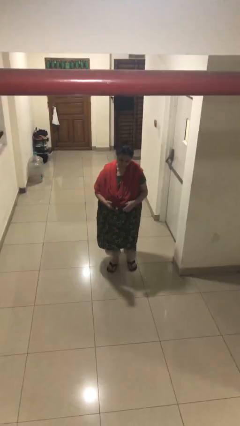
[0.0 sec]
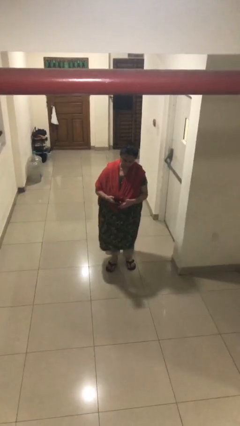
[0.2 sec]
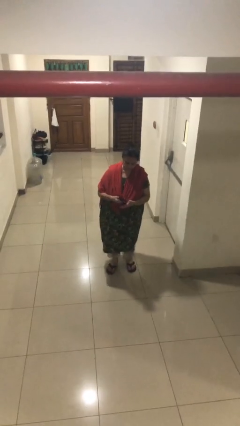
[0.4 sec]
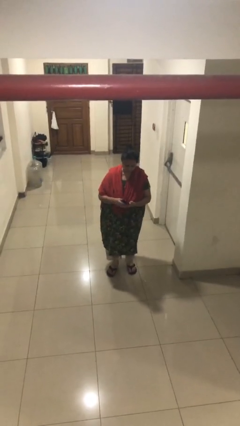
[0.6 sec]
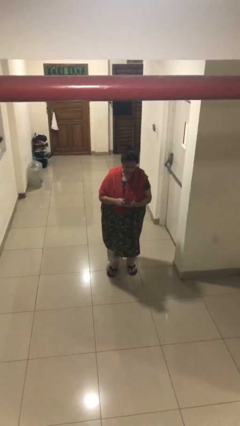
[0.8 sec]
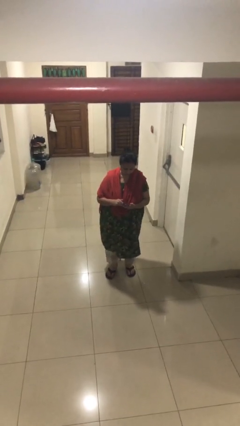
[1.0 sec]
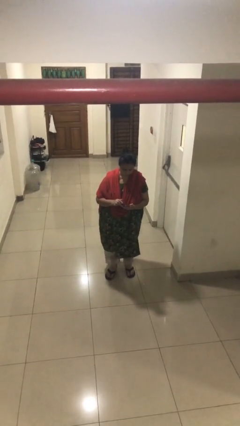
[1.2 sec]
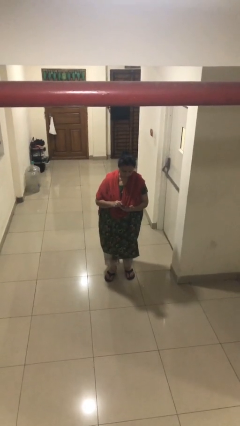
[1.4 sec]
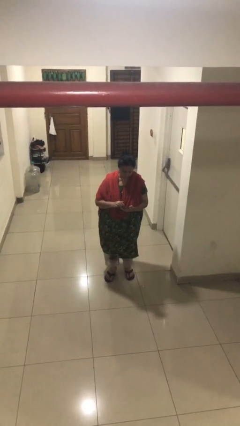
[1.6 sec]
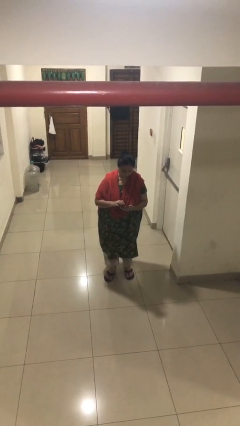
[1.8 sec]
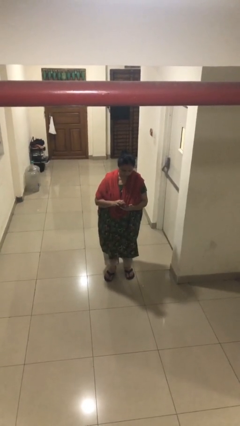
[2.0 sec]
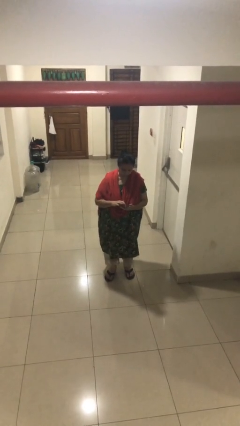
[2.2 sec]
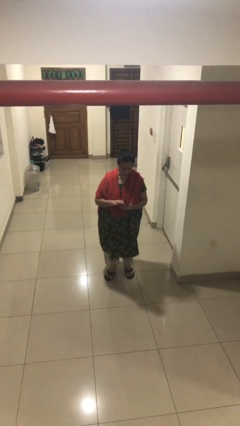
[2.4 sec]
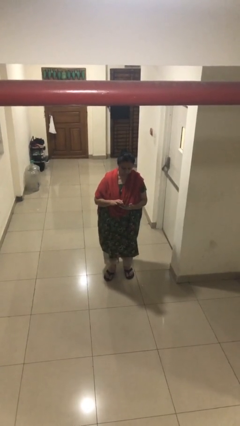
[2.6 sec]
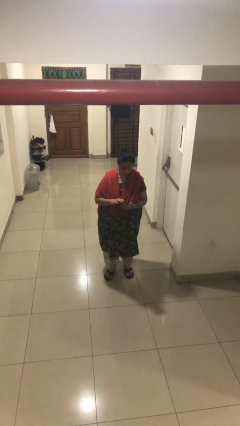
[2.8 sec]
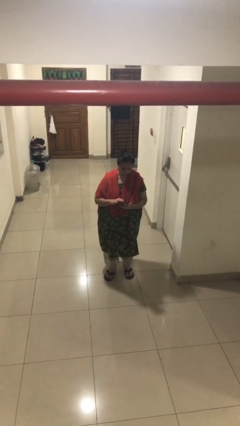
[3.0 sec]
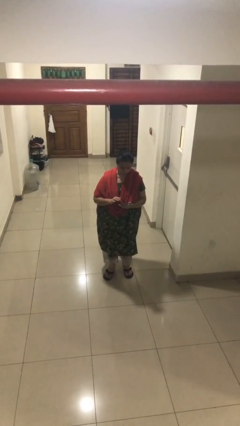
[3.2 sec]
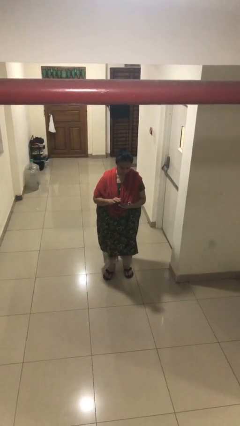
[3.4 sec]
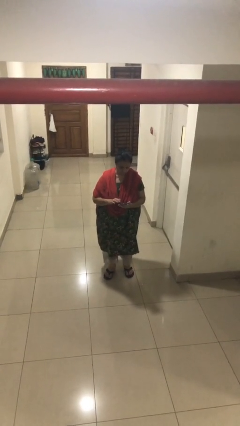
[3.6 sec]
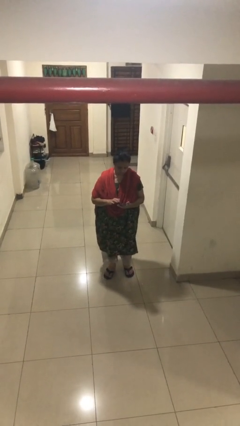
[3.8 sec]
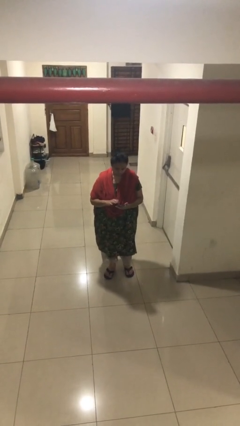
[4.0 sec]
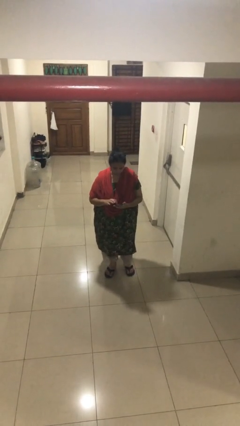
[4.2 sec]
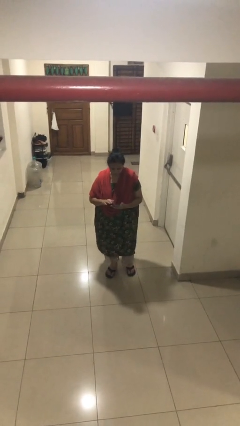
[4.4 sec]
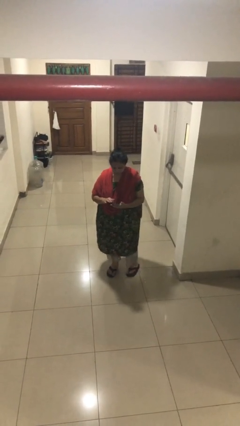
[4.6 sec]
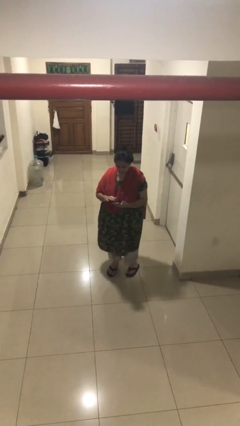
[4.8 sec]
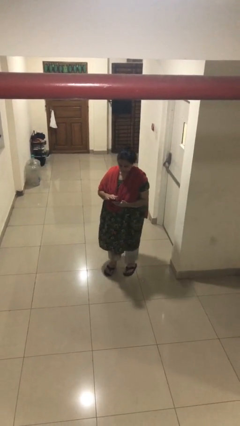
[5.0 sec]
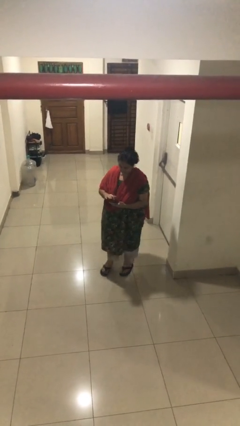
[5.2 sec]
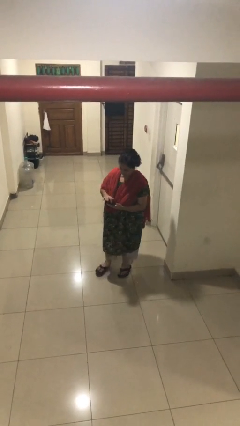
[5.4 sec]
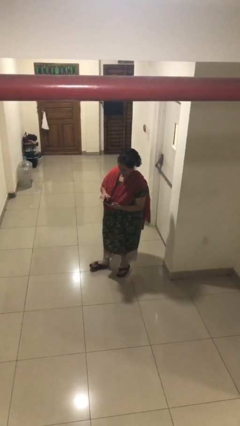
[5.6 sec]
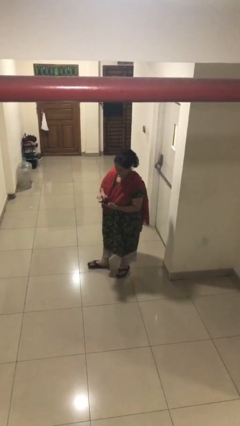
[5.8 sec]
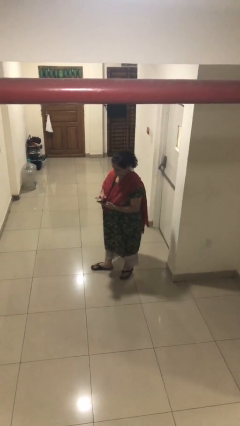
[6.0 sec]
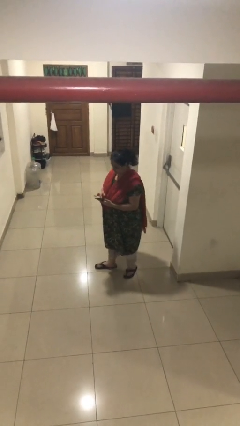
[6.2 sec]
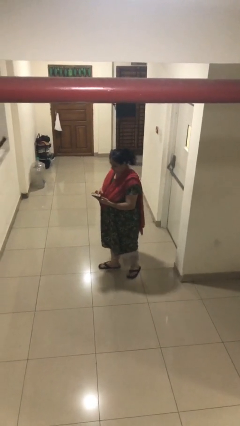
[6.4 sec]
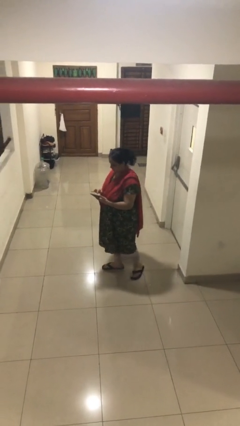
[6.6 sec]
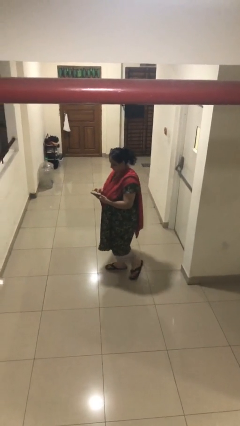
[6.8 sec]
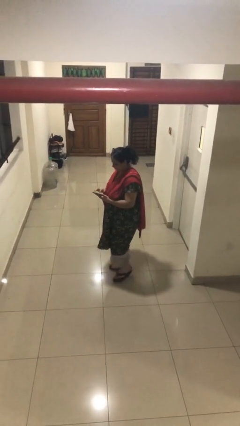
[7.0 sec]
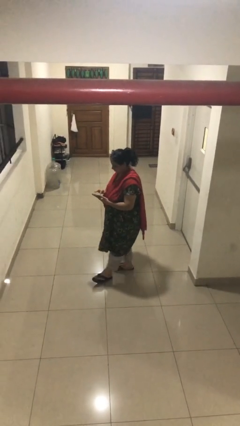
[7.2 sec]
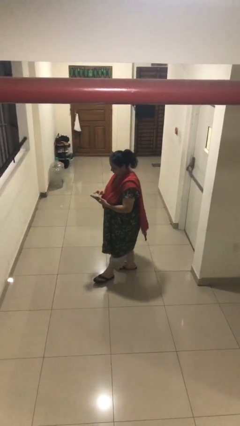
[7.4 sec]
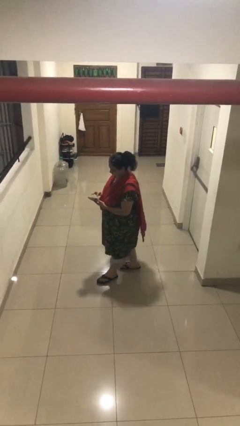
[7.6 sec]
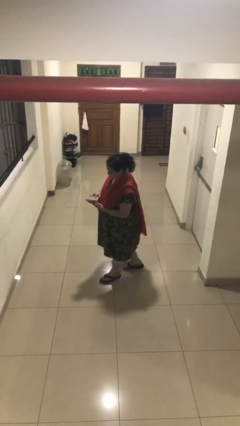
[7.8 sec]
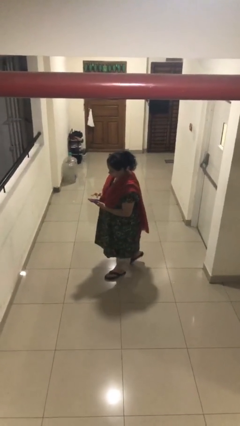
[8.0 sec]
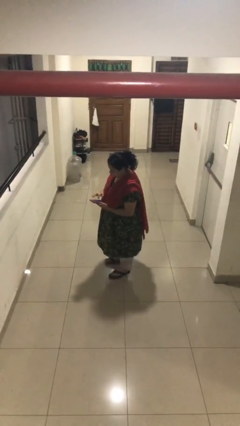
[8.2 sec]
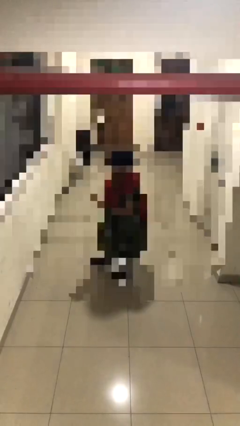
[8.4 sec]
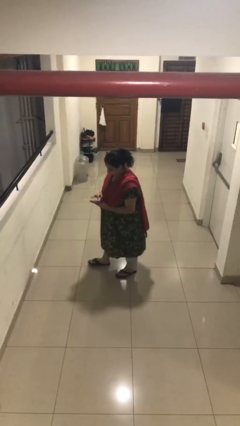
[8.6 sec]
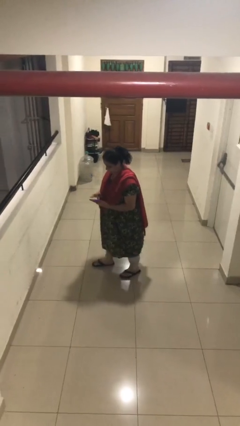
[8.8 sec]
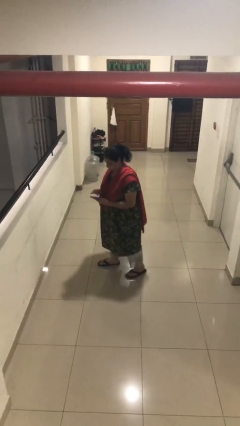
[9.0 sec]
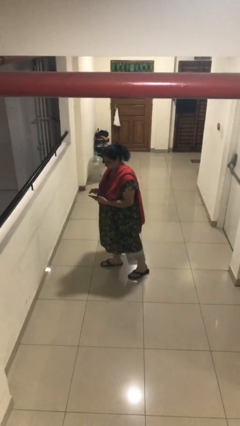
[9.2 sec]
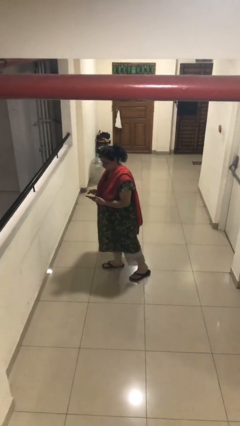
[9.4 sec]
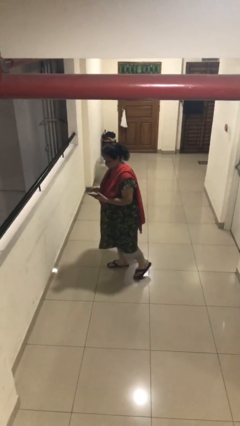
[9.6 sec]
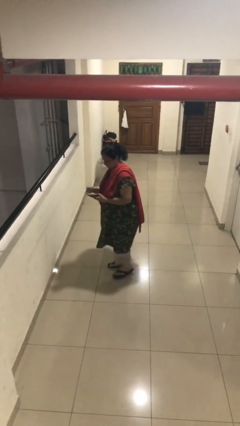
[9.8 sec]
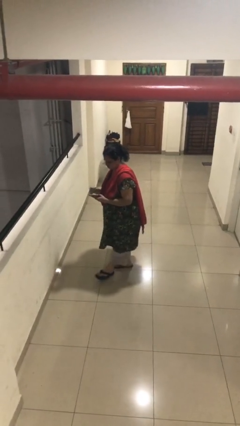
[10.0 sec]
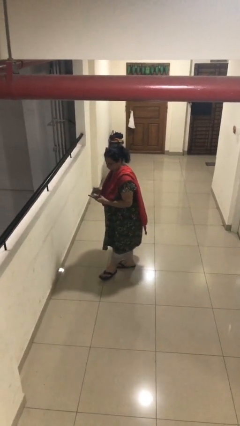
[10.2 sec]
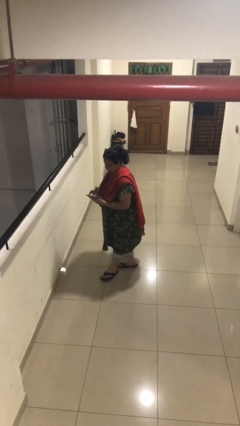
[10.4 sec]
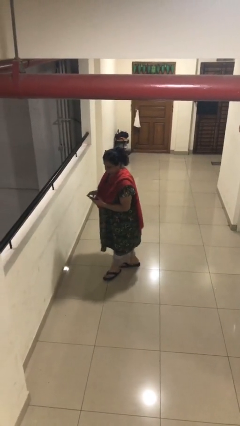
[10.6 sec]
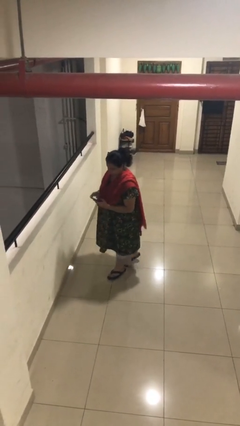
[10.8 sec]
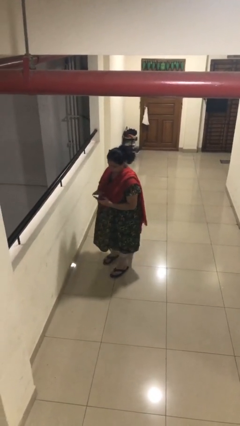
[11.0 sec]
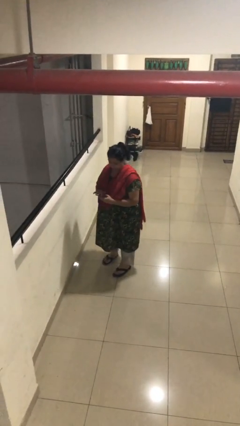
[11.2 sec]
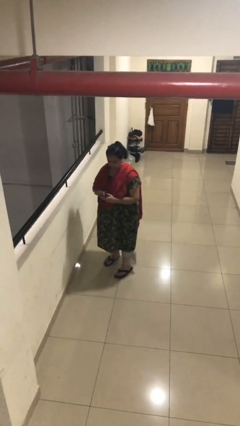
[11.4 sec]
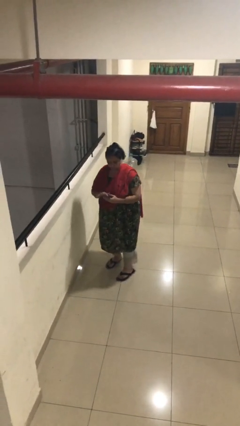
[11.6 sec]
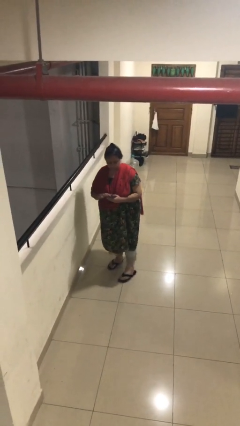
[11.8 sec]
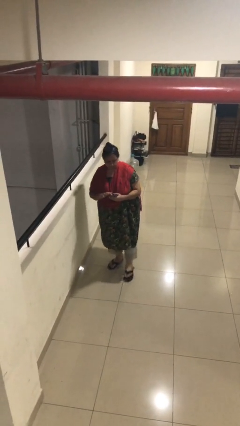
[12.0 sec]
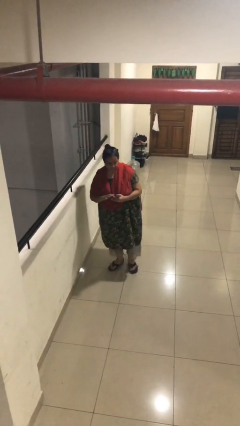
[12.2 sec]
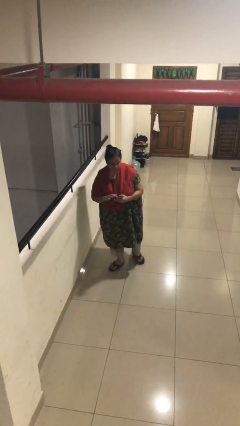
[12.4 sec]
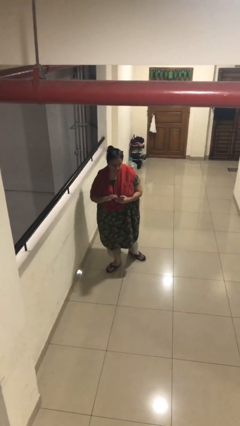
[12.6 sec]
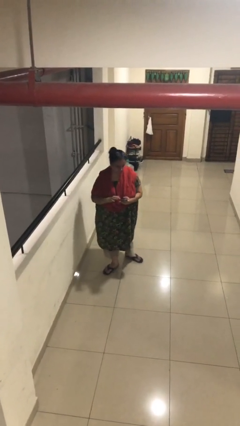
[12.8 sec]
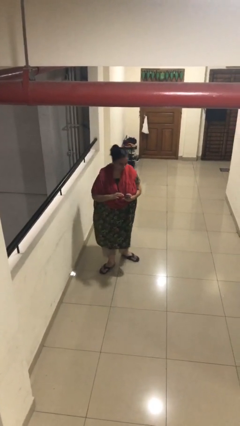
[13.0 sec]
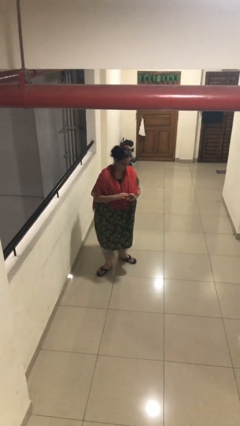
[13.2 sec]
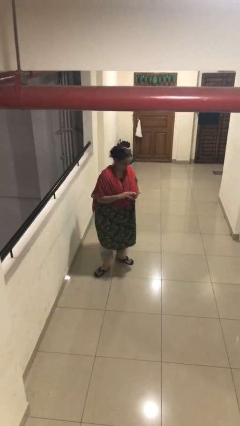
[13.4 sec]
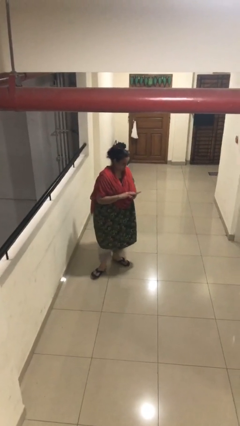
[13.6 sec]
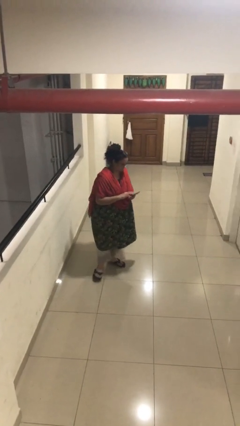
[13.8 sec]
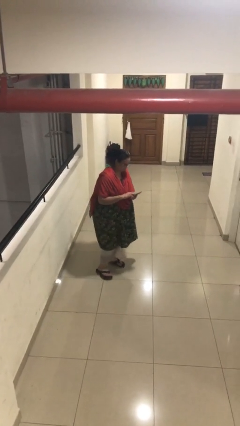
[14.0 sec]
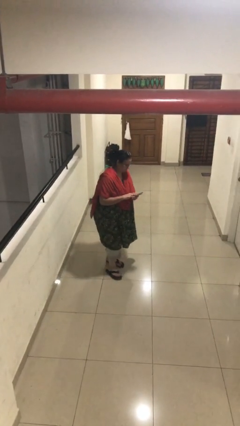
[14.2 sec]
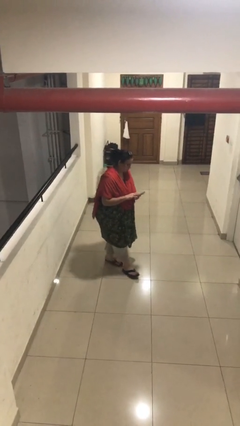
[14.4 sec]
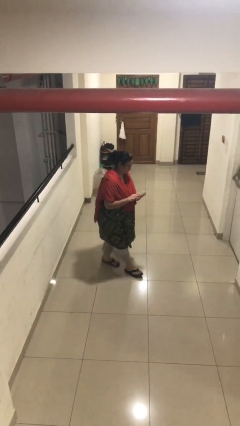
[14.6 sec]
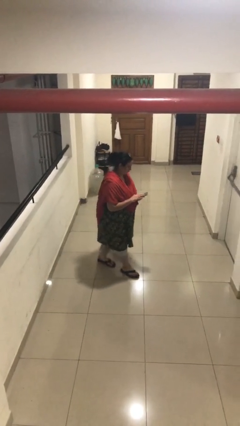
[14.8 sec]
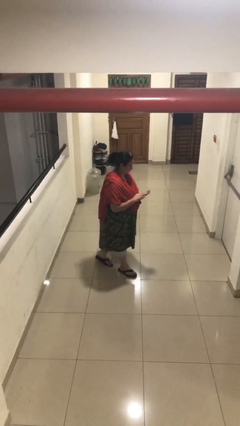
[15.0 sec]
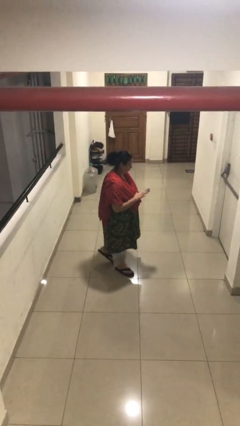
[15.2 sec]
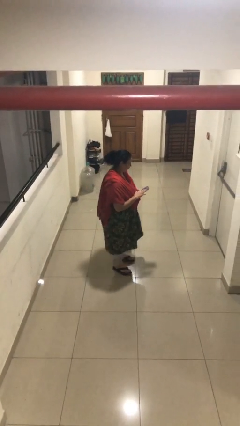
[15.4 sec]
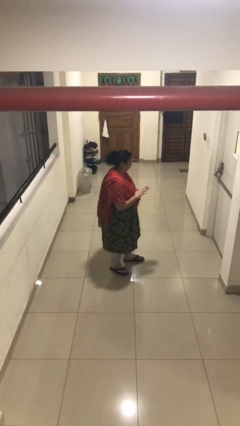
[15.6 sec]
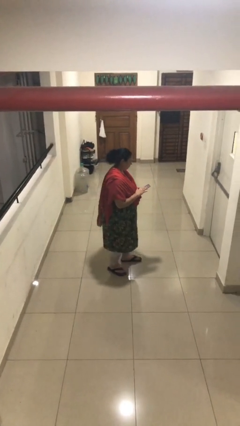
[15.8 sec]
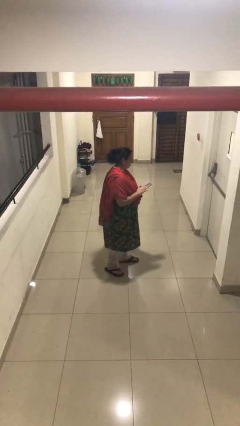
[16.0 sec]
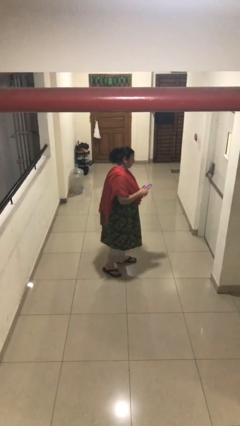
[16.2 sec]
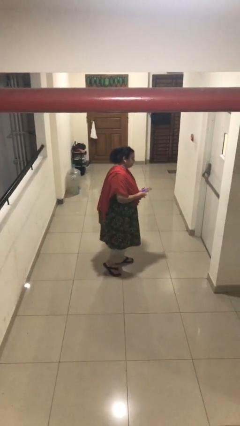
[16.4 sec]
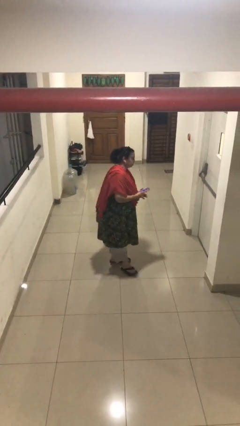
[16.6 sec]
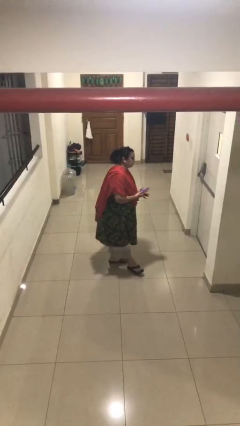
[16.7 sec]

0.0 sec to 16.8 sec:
person texts on phone

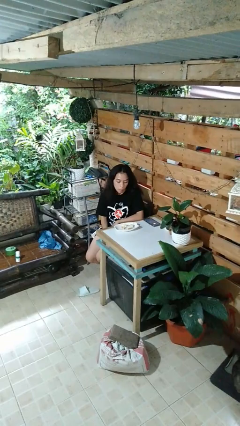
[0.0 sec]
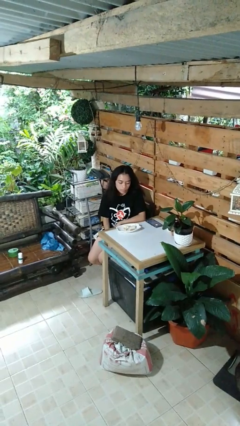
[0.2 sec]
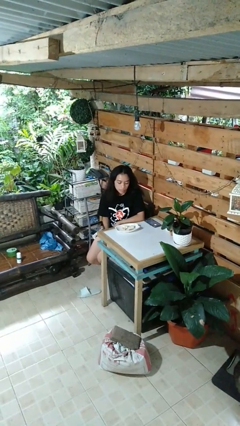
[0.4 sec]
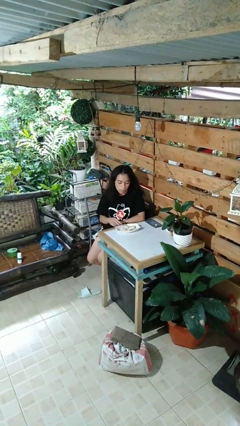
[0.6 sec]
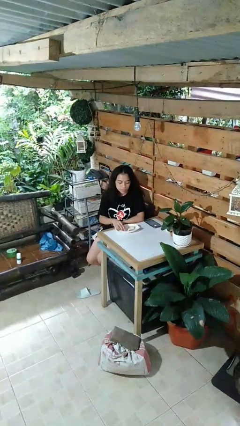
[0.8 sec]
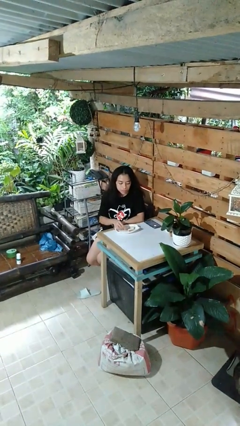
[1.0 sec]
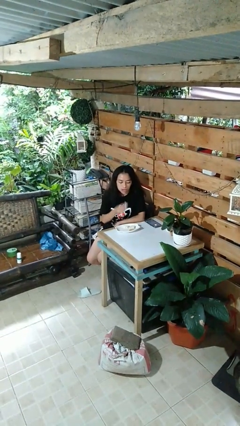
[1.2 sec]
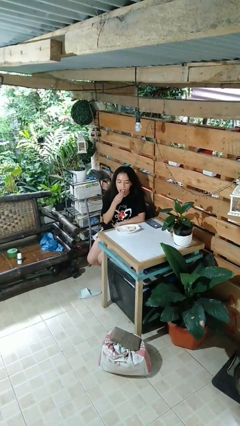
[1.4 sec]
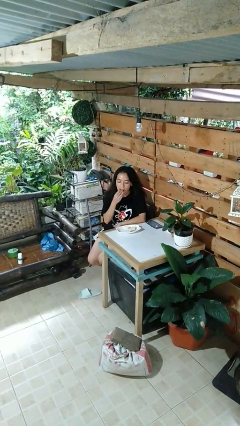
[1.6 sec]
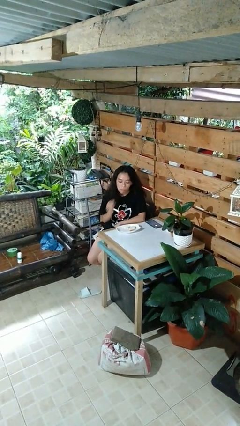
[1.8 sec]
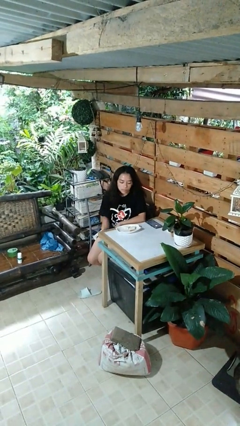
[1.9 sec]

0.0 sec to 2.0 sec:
person eats with hands
